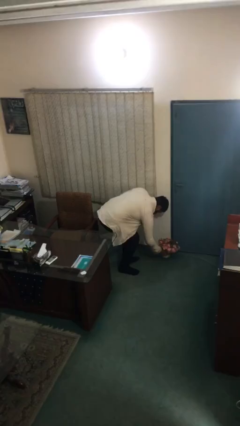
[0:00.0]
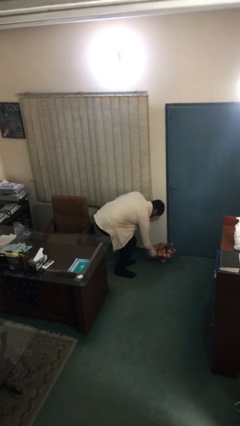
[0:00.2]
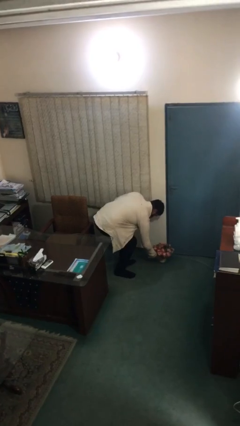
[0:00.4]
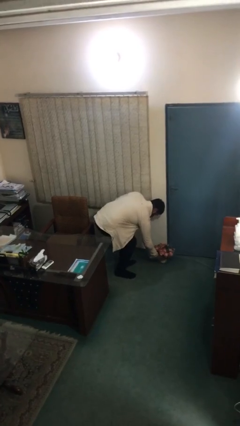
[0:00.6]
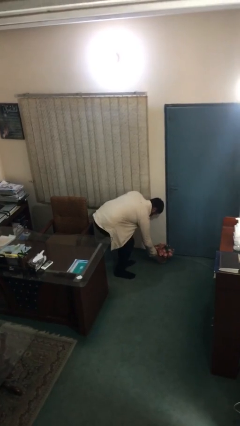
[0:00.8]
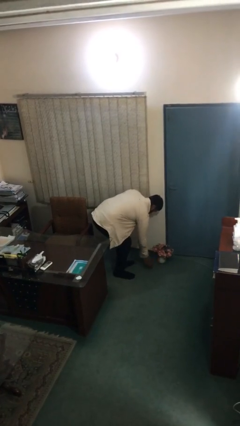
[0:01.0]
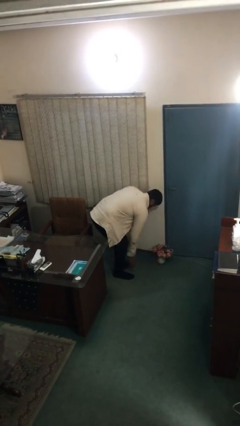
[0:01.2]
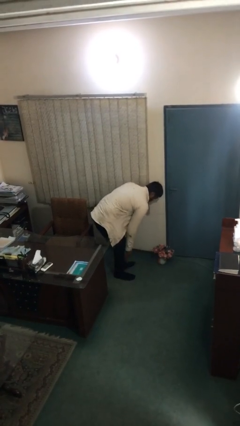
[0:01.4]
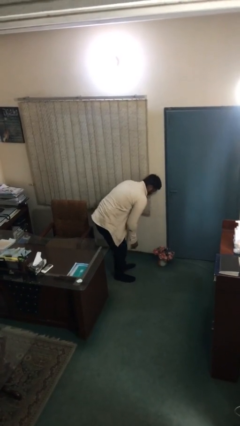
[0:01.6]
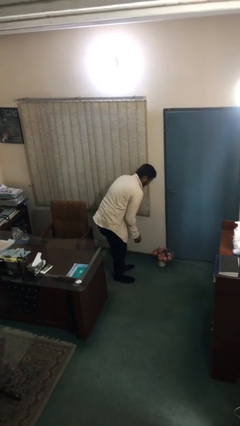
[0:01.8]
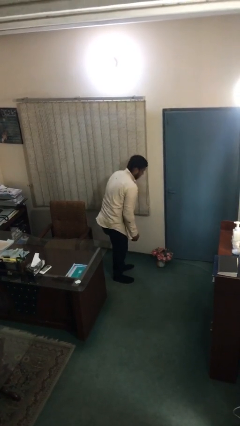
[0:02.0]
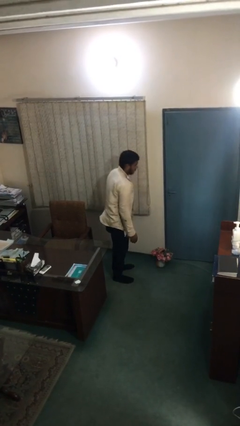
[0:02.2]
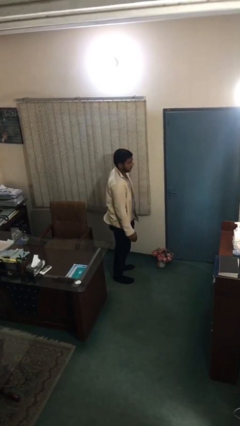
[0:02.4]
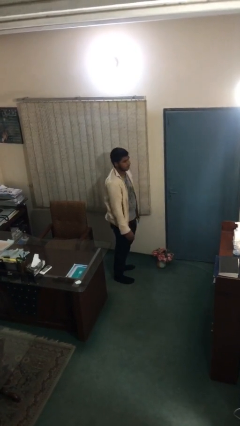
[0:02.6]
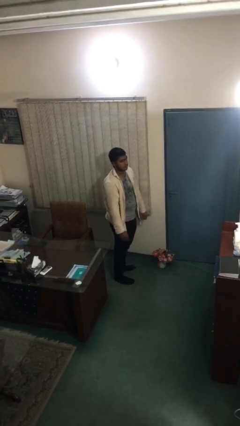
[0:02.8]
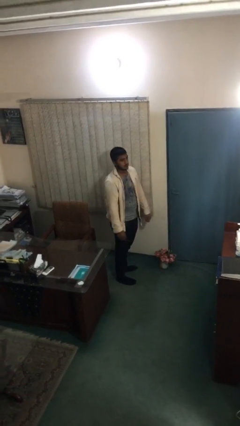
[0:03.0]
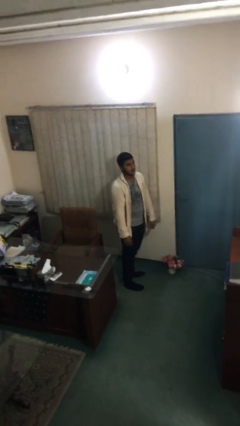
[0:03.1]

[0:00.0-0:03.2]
person puts down object on floor

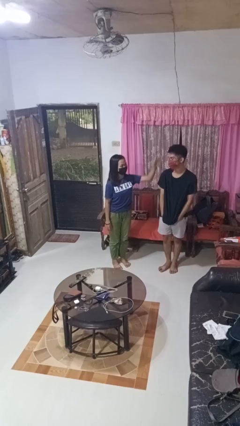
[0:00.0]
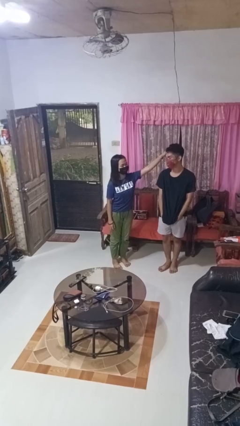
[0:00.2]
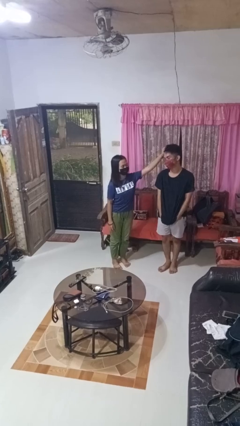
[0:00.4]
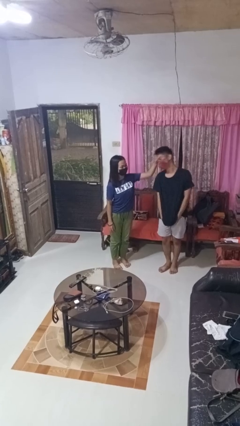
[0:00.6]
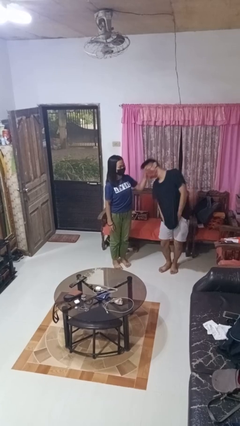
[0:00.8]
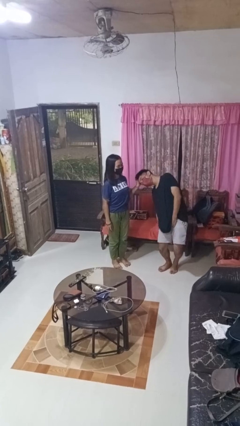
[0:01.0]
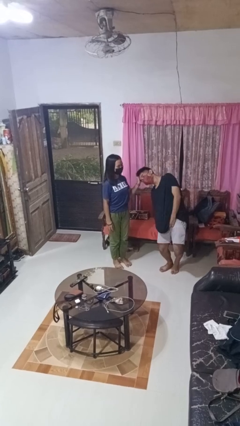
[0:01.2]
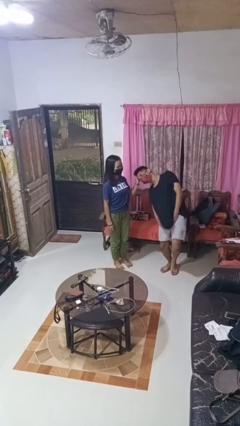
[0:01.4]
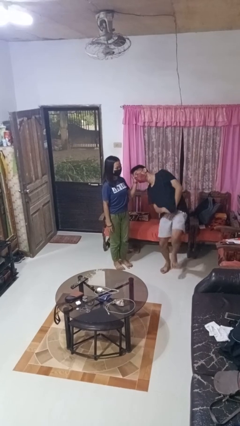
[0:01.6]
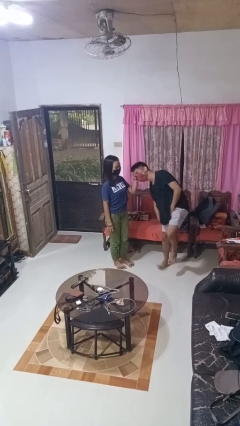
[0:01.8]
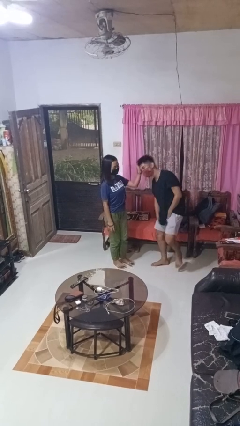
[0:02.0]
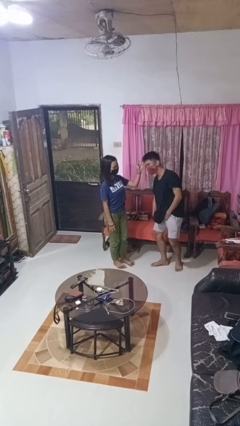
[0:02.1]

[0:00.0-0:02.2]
person grabs person by hair

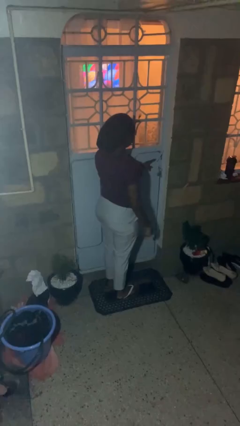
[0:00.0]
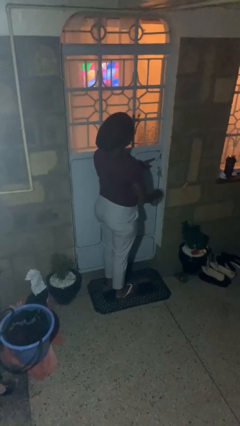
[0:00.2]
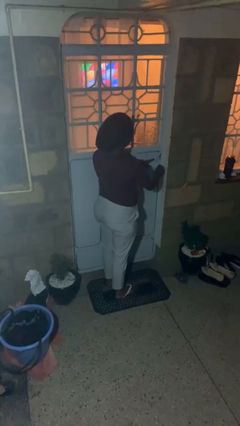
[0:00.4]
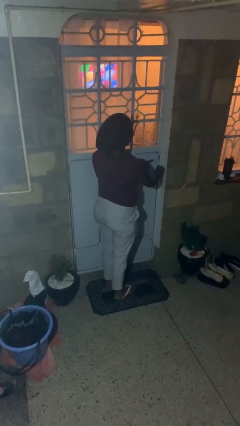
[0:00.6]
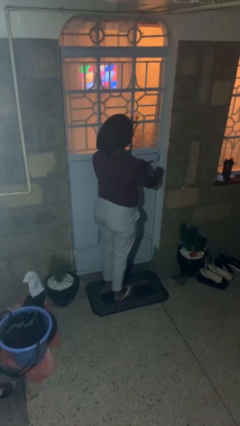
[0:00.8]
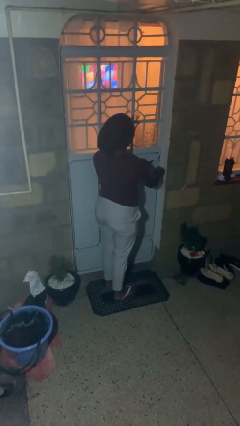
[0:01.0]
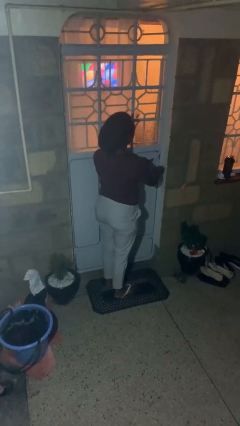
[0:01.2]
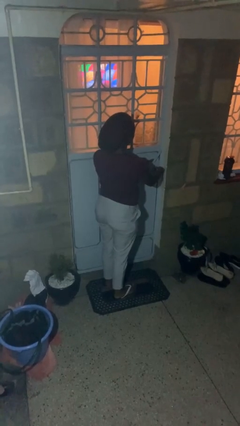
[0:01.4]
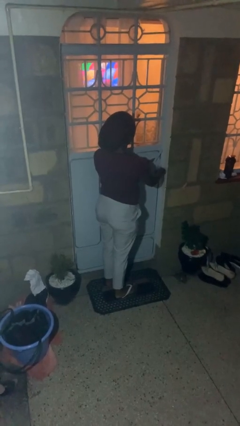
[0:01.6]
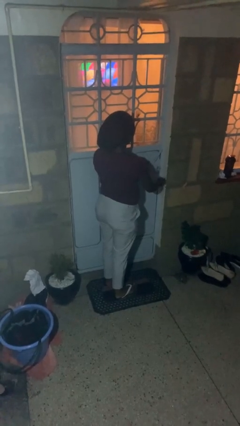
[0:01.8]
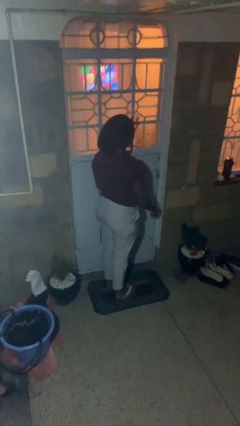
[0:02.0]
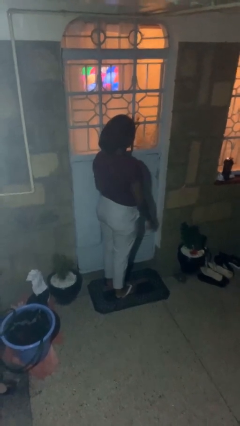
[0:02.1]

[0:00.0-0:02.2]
person locks door with keys

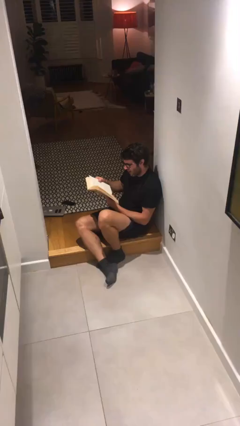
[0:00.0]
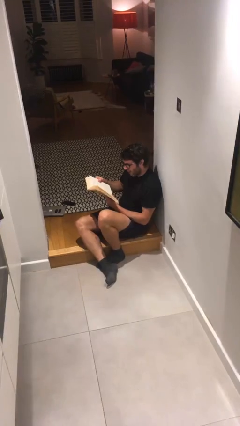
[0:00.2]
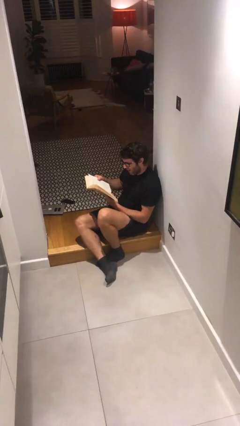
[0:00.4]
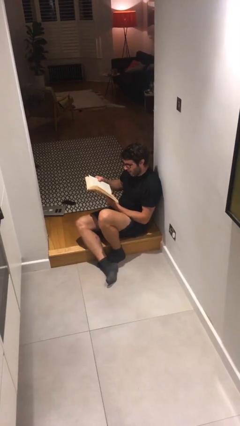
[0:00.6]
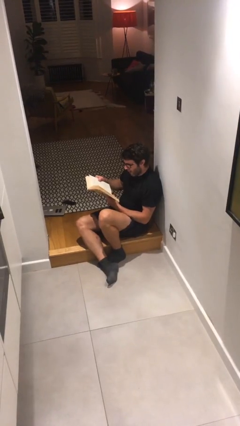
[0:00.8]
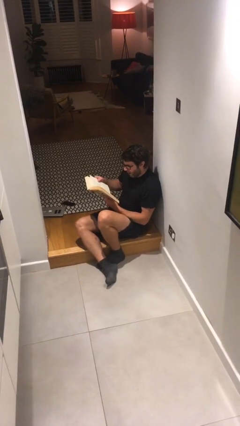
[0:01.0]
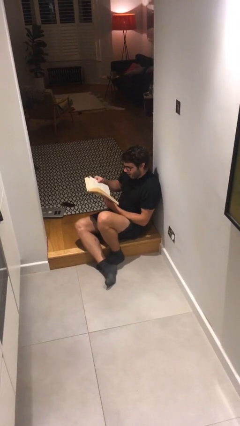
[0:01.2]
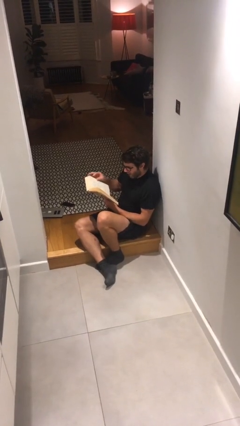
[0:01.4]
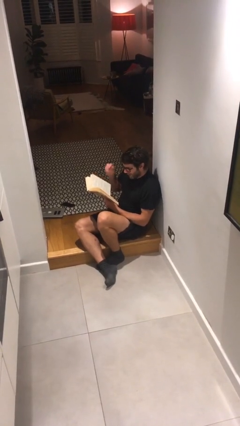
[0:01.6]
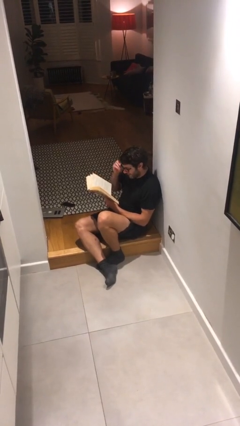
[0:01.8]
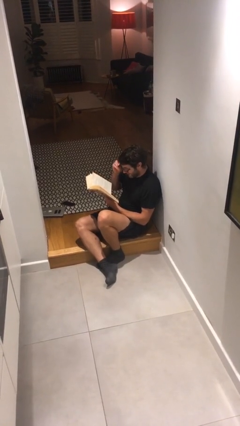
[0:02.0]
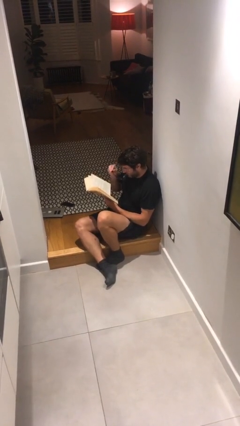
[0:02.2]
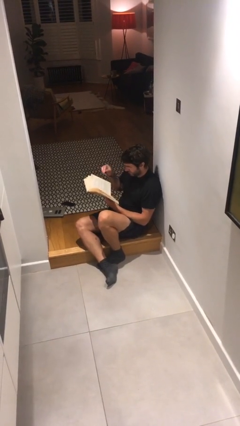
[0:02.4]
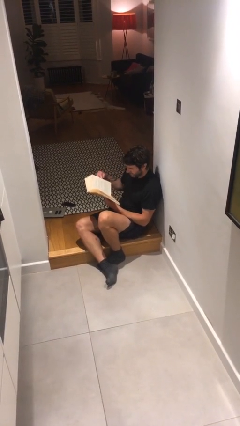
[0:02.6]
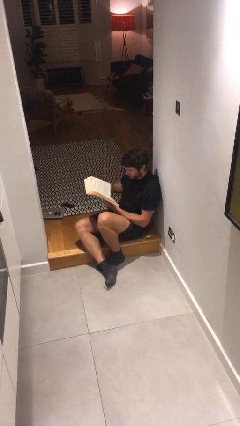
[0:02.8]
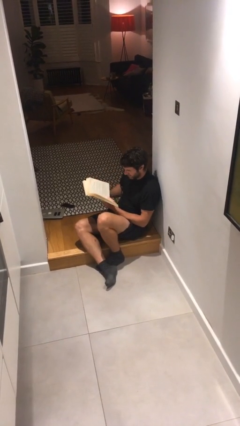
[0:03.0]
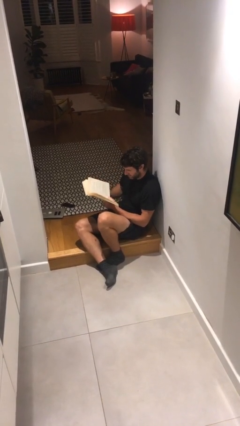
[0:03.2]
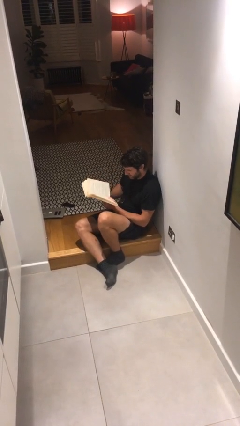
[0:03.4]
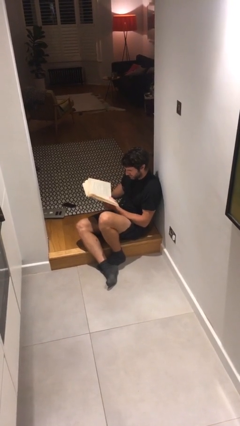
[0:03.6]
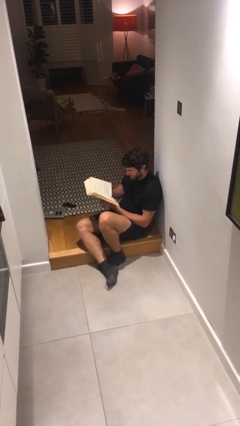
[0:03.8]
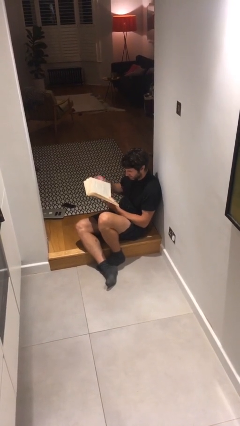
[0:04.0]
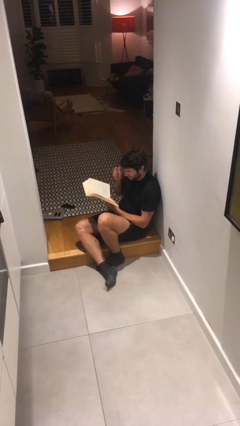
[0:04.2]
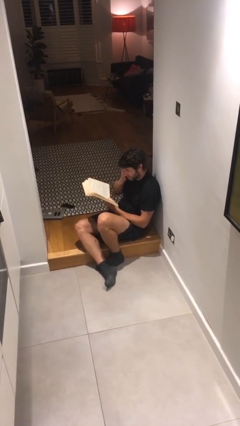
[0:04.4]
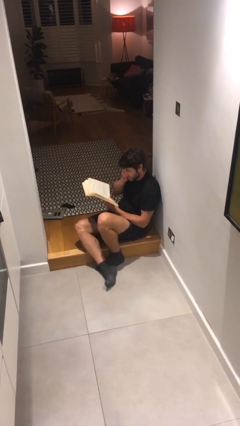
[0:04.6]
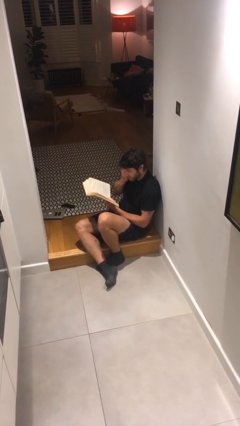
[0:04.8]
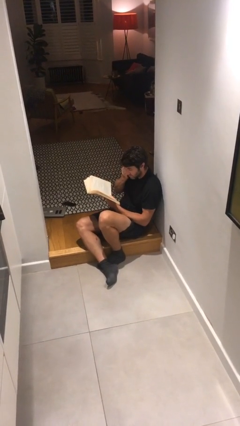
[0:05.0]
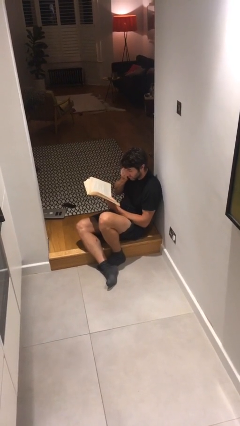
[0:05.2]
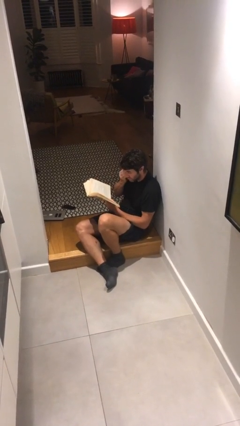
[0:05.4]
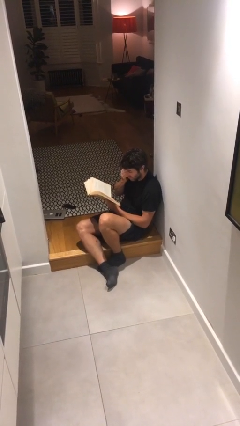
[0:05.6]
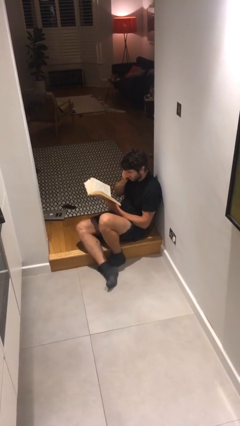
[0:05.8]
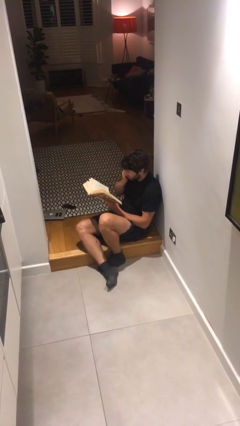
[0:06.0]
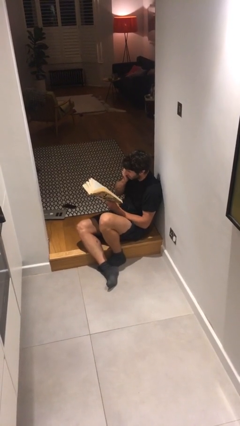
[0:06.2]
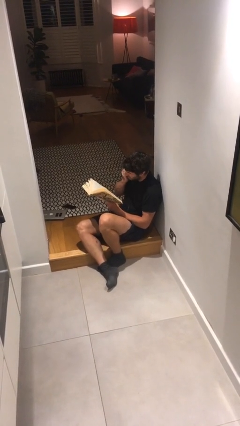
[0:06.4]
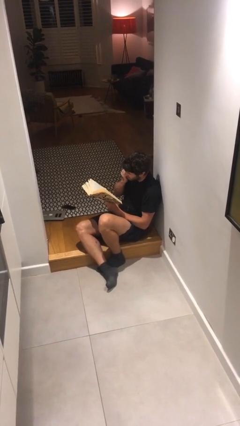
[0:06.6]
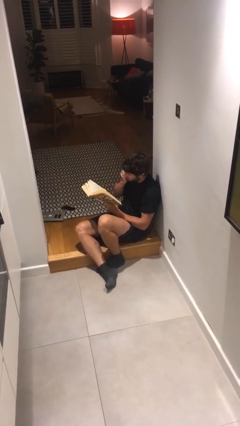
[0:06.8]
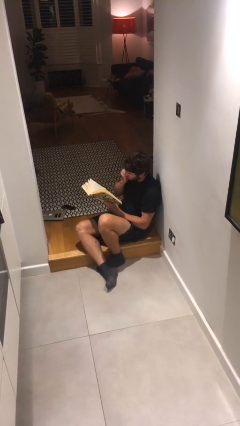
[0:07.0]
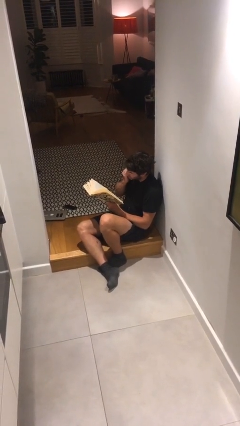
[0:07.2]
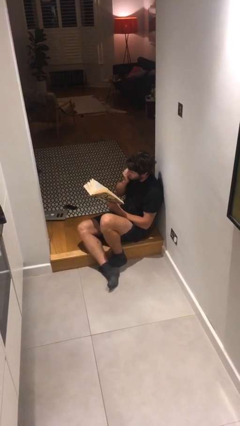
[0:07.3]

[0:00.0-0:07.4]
person reads document

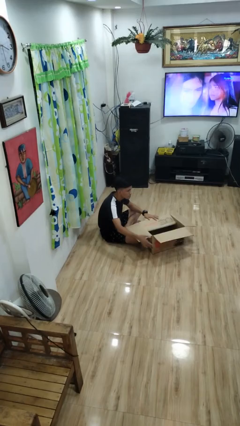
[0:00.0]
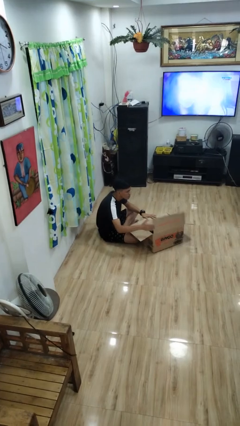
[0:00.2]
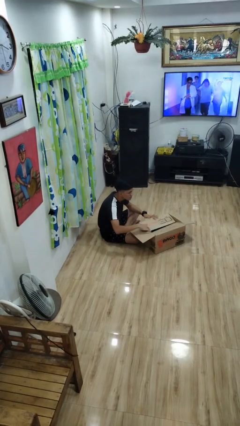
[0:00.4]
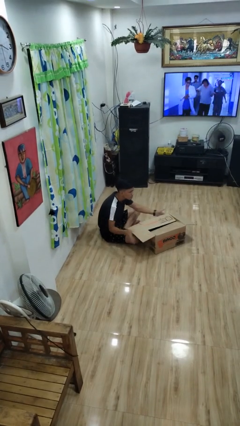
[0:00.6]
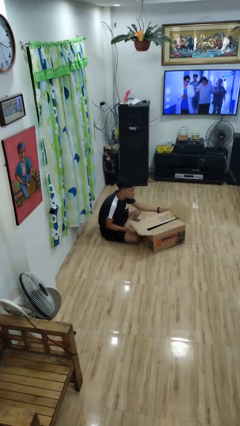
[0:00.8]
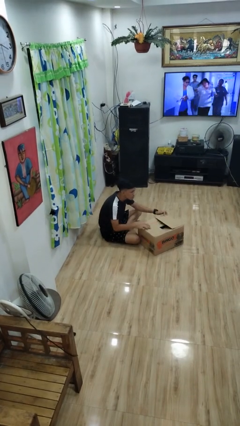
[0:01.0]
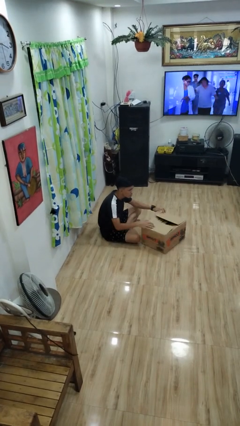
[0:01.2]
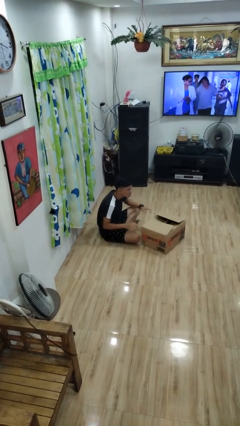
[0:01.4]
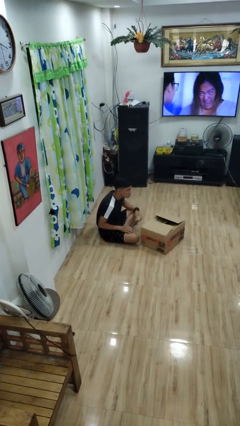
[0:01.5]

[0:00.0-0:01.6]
person closes box

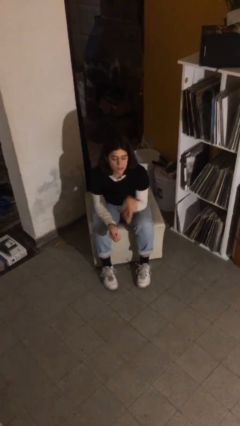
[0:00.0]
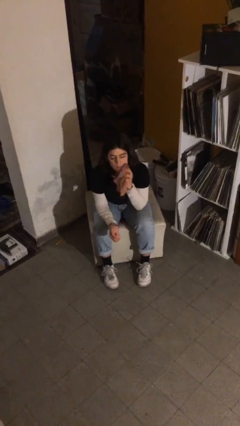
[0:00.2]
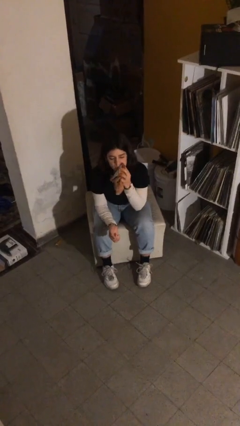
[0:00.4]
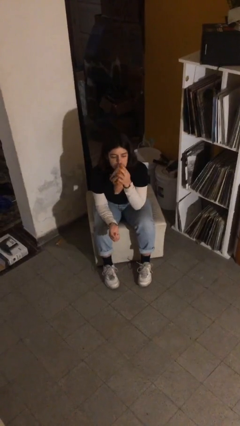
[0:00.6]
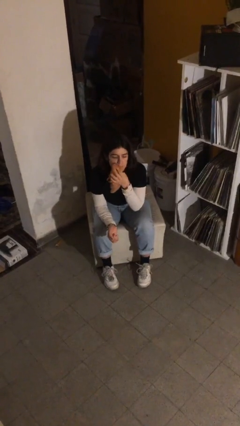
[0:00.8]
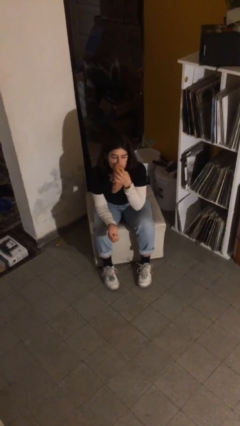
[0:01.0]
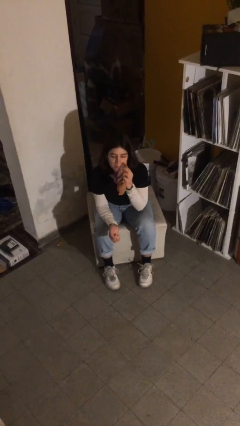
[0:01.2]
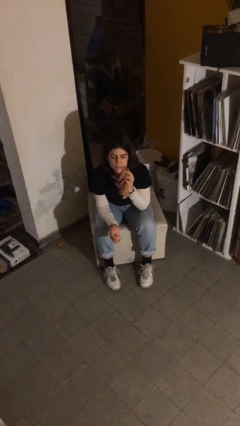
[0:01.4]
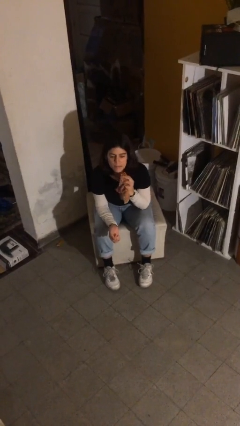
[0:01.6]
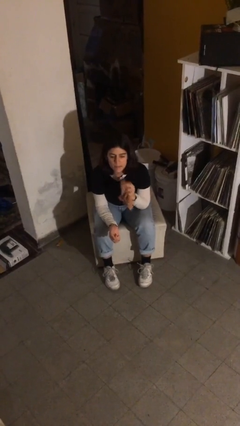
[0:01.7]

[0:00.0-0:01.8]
person wipes mouth with napkin
